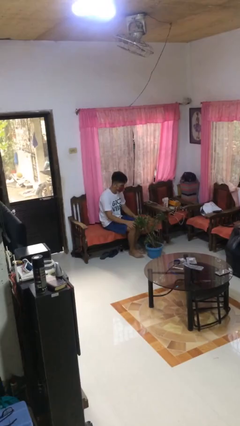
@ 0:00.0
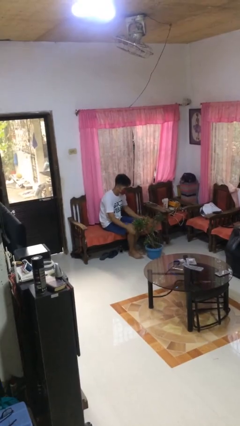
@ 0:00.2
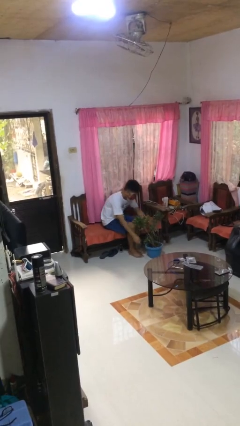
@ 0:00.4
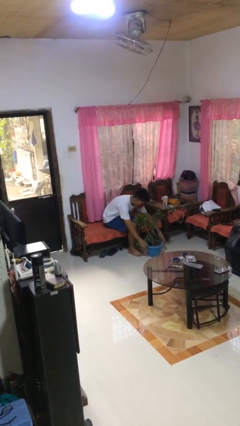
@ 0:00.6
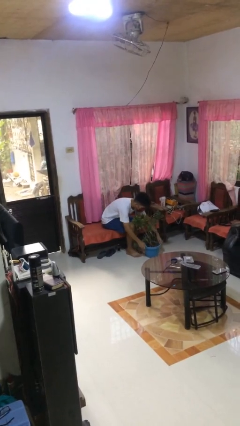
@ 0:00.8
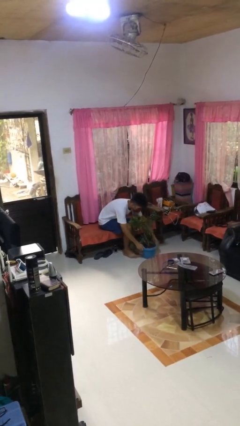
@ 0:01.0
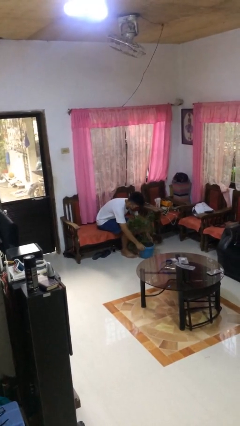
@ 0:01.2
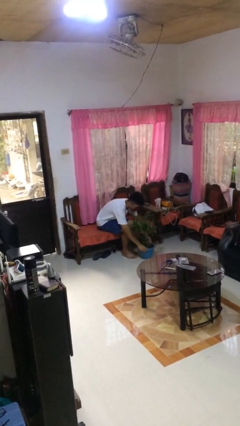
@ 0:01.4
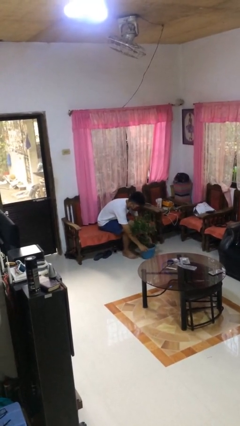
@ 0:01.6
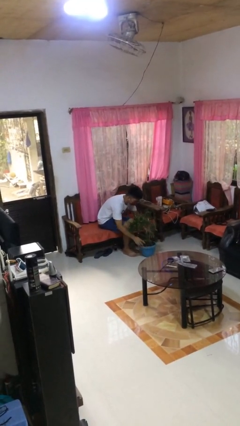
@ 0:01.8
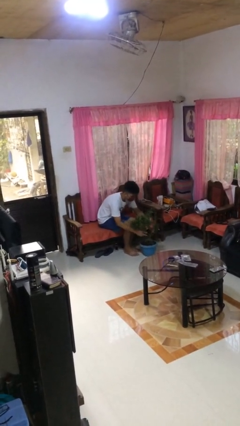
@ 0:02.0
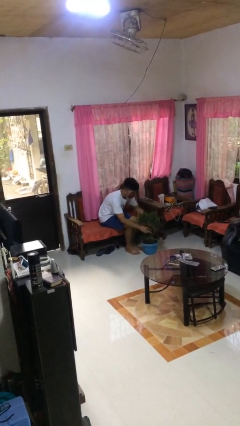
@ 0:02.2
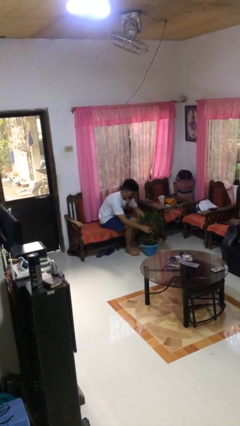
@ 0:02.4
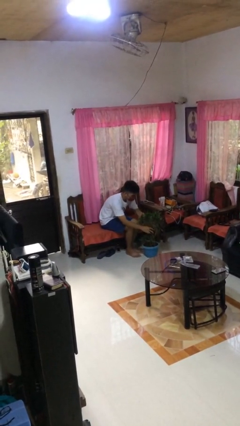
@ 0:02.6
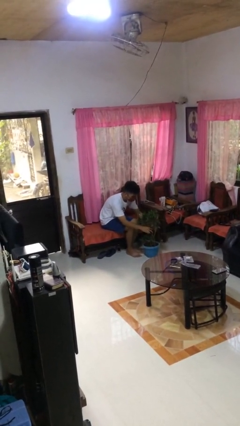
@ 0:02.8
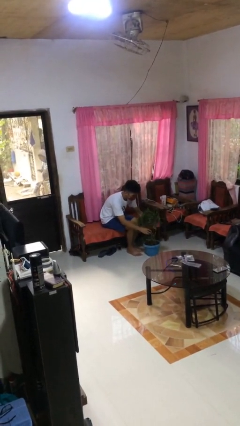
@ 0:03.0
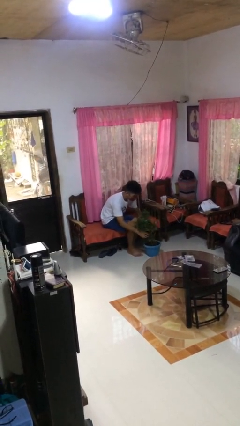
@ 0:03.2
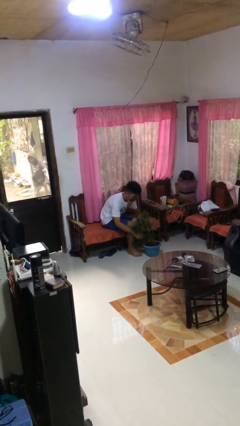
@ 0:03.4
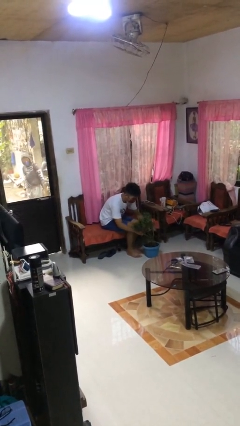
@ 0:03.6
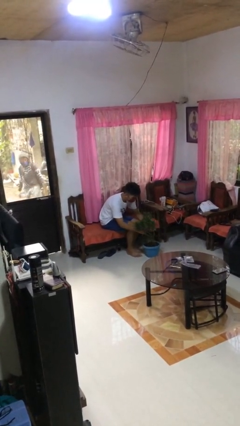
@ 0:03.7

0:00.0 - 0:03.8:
person arranges flowers in vase

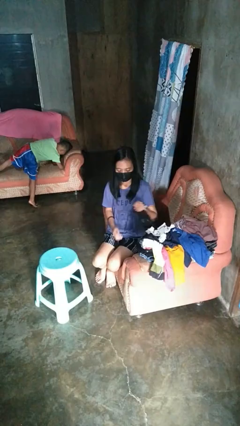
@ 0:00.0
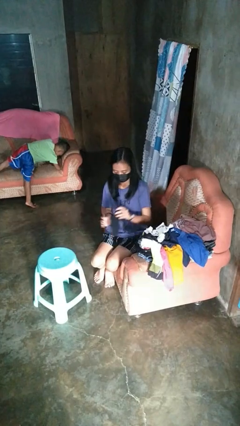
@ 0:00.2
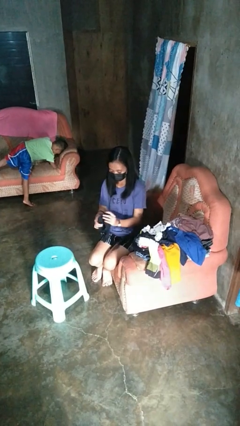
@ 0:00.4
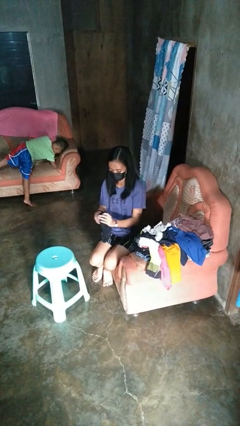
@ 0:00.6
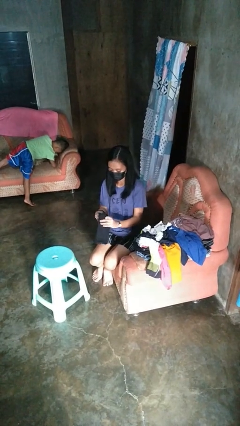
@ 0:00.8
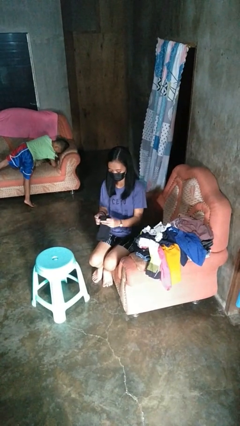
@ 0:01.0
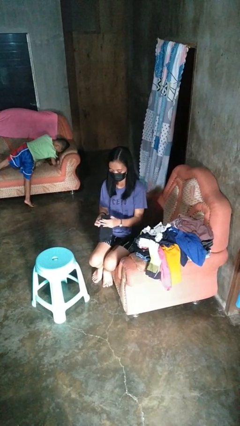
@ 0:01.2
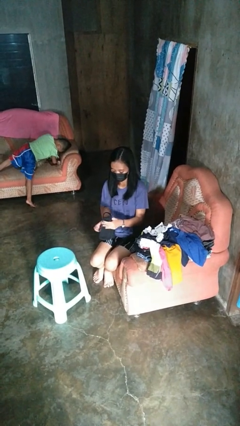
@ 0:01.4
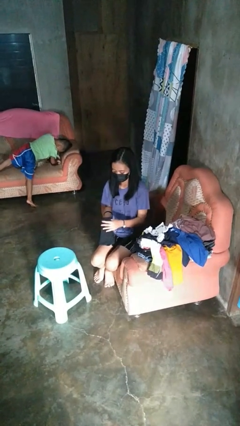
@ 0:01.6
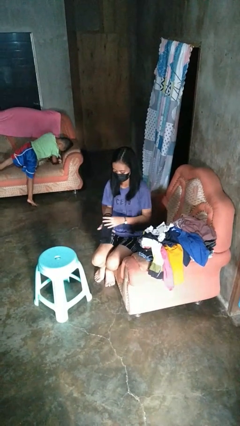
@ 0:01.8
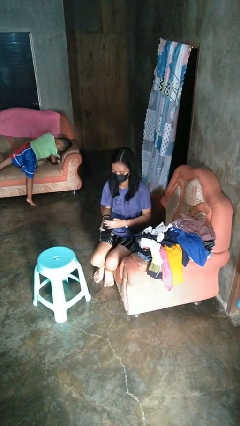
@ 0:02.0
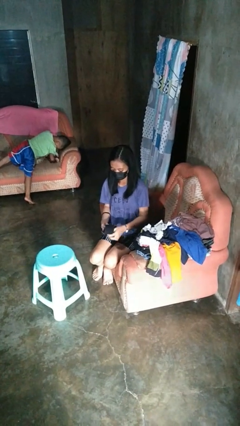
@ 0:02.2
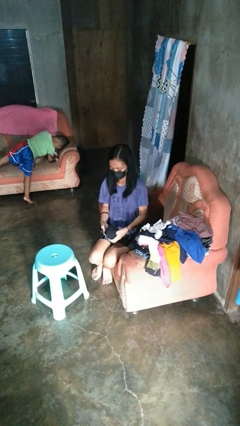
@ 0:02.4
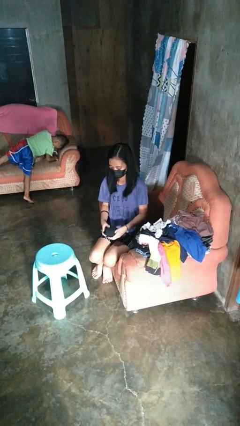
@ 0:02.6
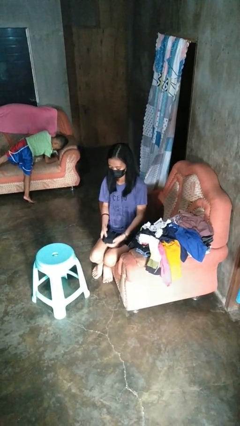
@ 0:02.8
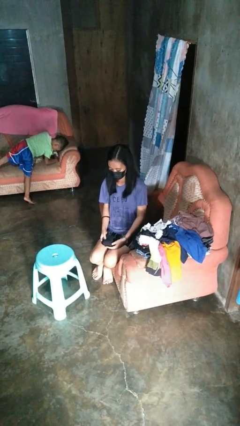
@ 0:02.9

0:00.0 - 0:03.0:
person folds socks

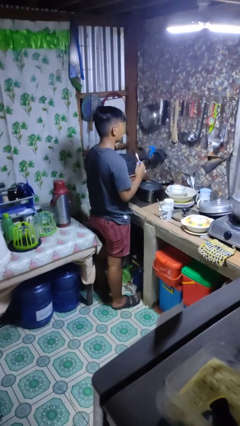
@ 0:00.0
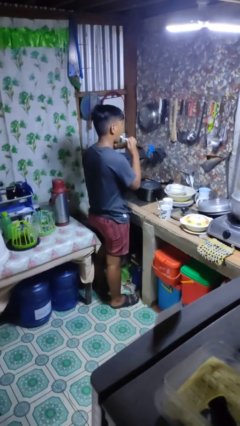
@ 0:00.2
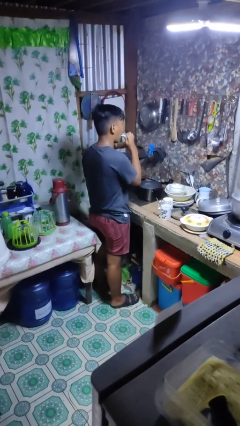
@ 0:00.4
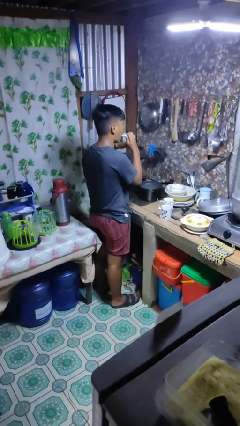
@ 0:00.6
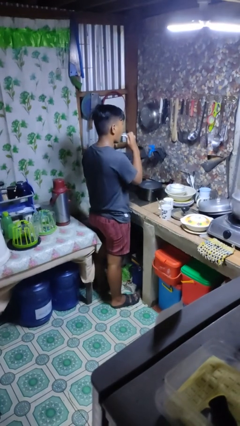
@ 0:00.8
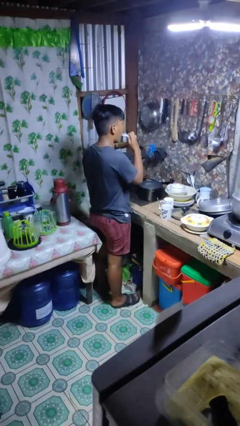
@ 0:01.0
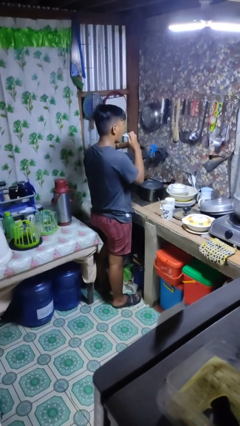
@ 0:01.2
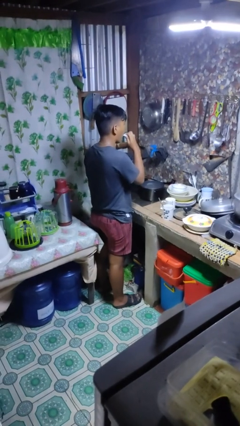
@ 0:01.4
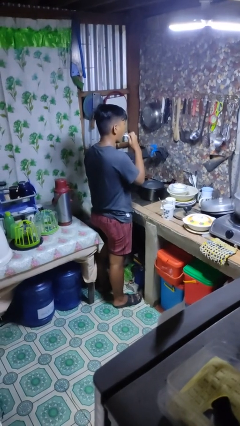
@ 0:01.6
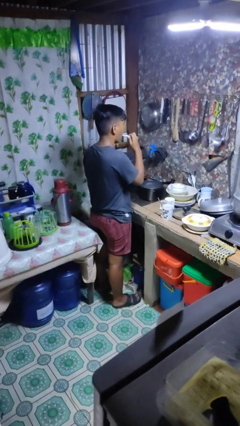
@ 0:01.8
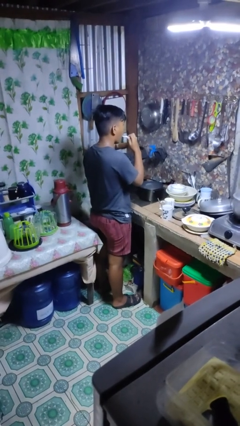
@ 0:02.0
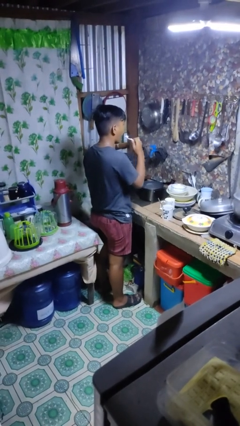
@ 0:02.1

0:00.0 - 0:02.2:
person brushes teeth

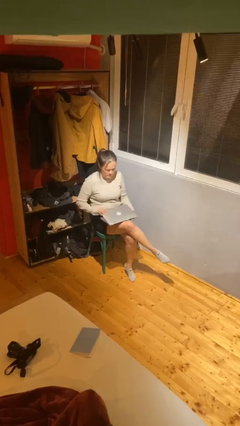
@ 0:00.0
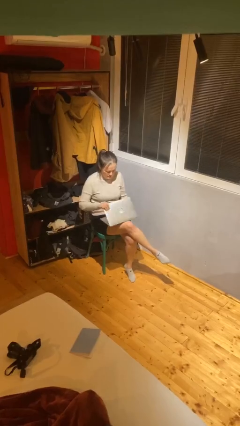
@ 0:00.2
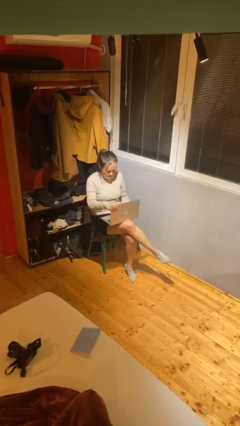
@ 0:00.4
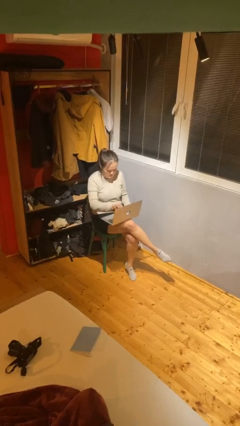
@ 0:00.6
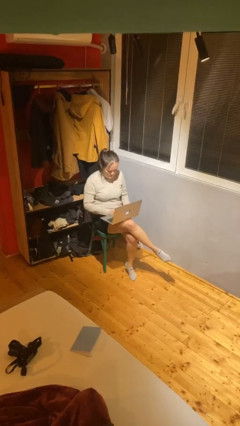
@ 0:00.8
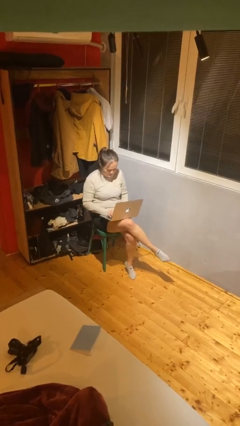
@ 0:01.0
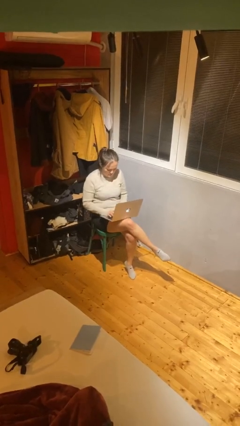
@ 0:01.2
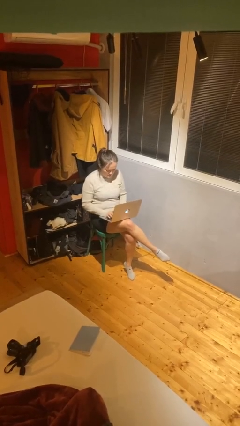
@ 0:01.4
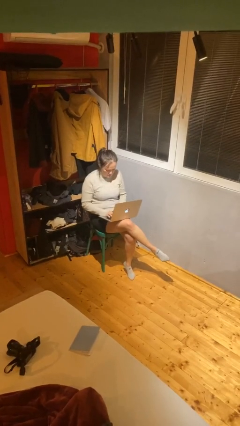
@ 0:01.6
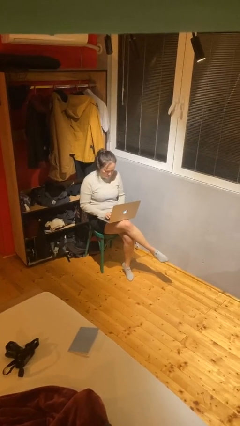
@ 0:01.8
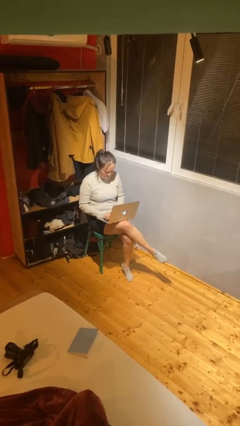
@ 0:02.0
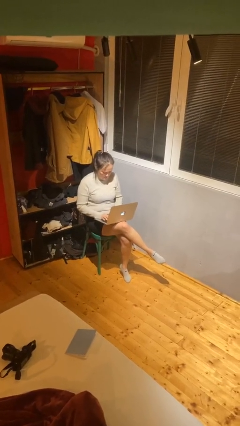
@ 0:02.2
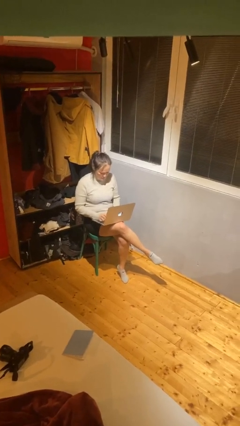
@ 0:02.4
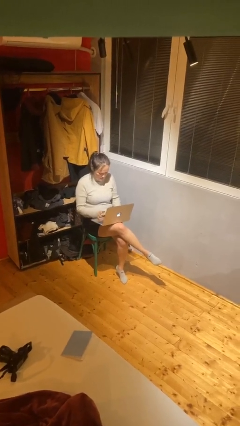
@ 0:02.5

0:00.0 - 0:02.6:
person interacts with laptop

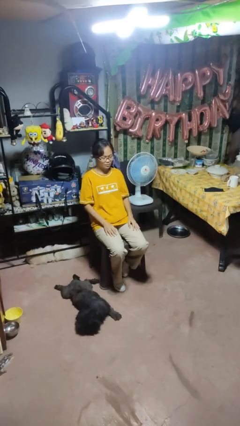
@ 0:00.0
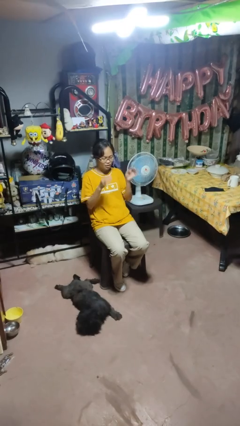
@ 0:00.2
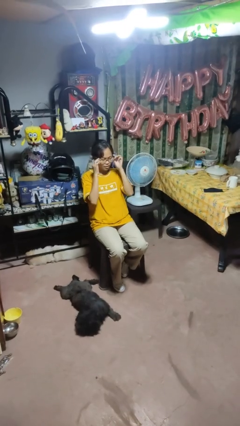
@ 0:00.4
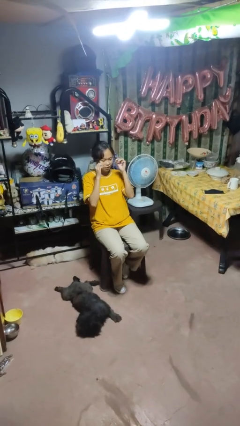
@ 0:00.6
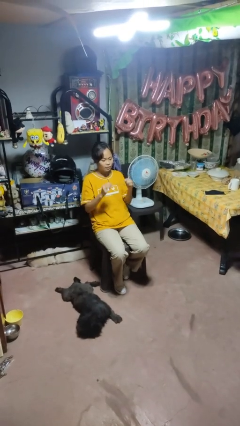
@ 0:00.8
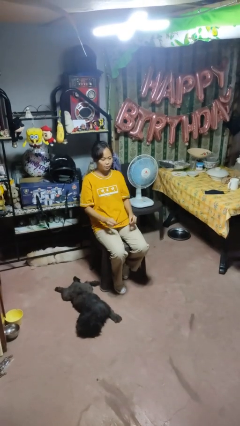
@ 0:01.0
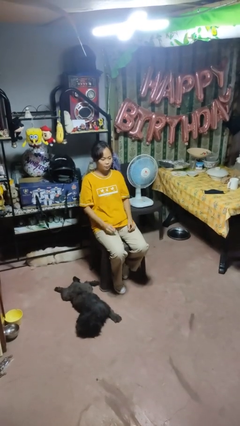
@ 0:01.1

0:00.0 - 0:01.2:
person takes off glasses

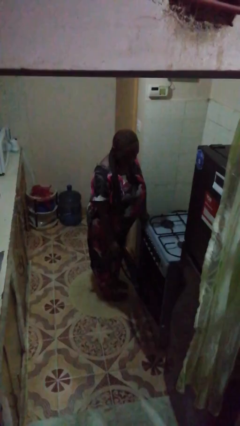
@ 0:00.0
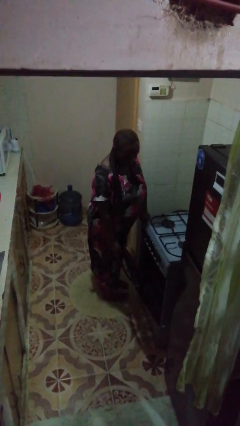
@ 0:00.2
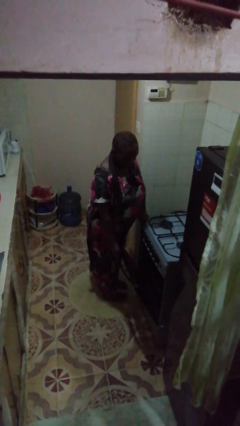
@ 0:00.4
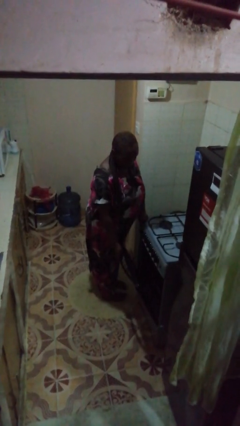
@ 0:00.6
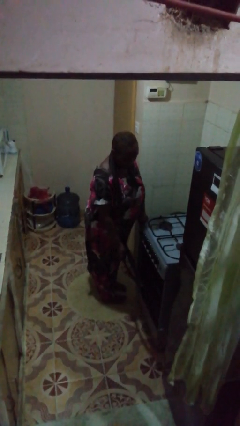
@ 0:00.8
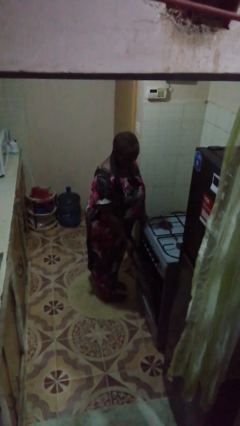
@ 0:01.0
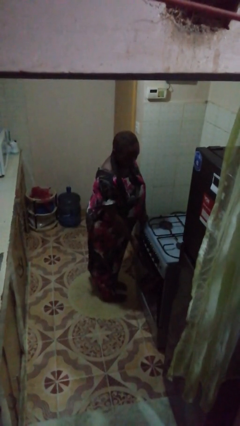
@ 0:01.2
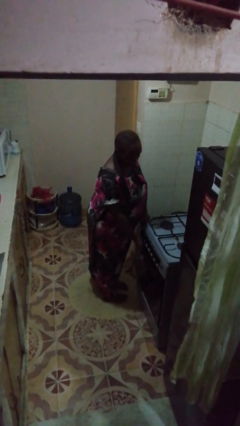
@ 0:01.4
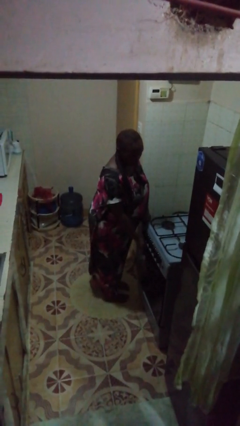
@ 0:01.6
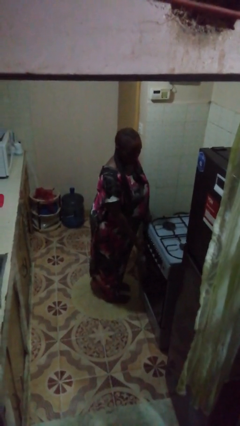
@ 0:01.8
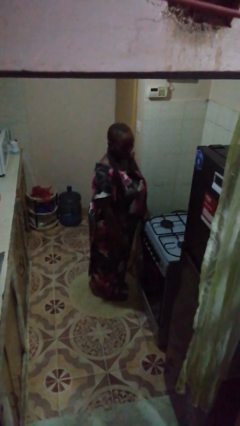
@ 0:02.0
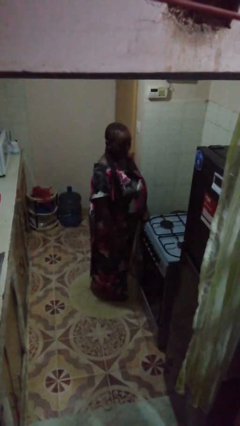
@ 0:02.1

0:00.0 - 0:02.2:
person closes oven door

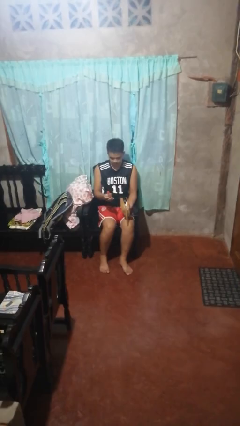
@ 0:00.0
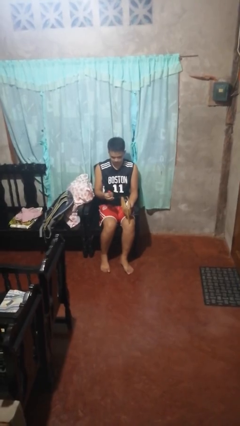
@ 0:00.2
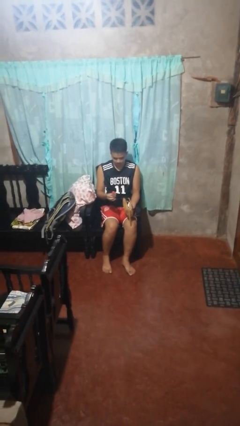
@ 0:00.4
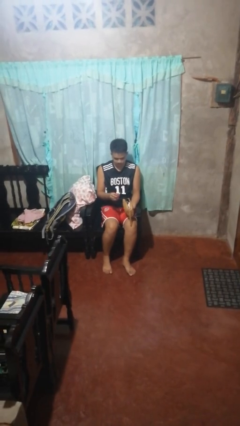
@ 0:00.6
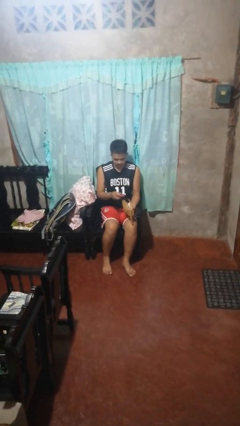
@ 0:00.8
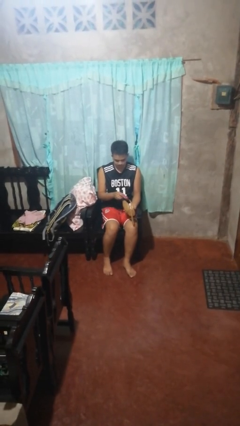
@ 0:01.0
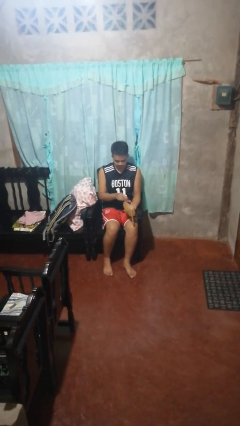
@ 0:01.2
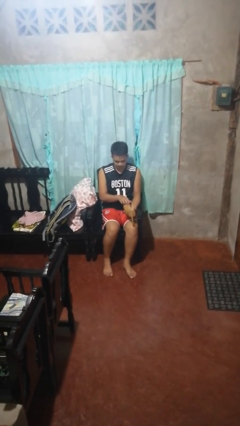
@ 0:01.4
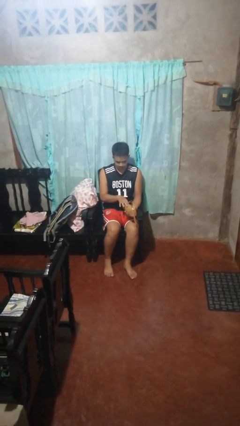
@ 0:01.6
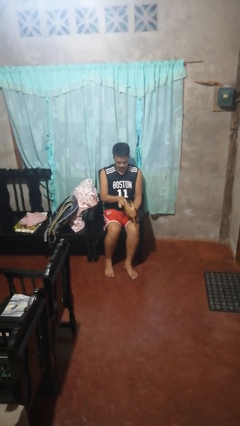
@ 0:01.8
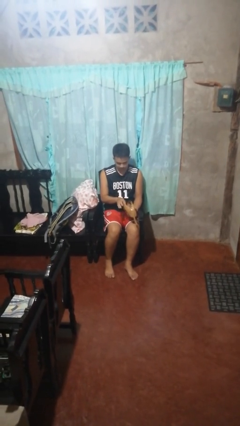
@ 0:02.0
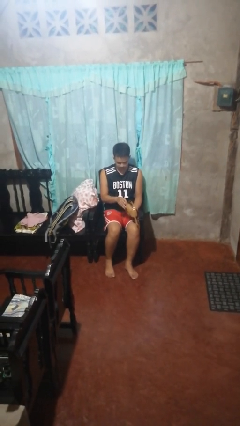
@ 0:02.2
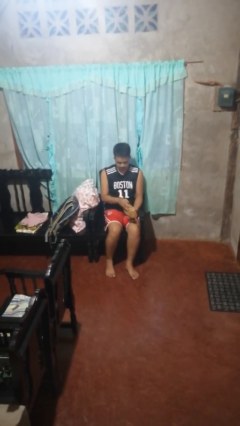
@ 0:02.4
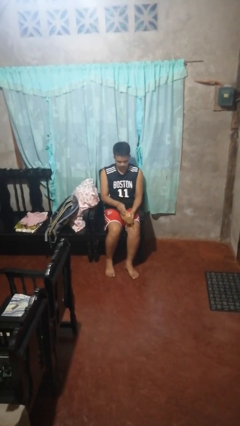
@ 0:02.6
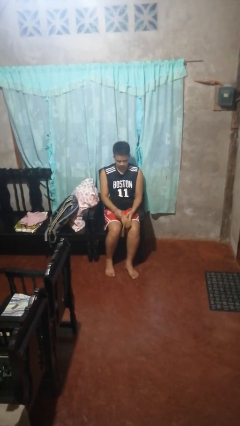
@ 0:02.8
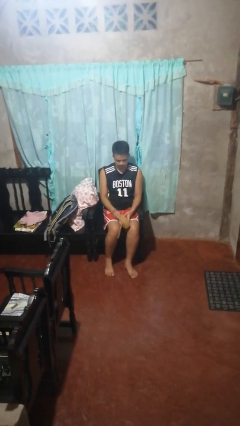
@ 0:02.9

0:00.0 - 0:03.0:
person puts object into purse
